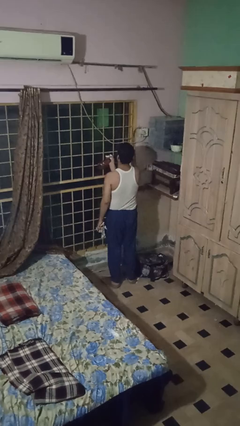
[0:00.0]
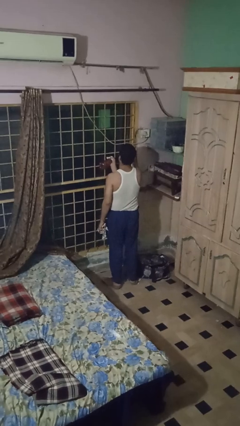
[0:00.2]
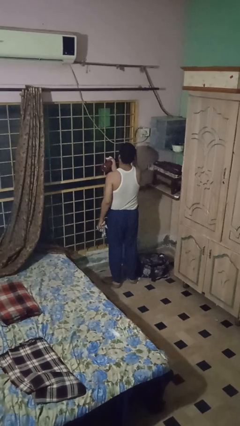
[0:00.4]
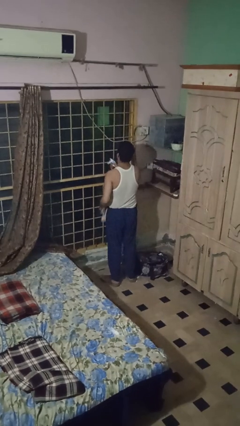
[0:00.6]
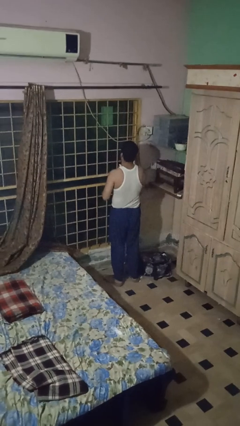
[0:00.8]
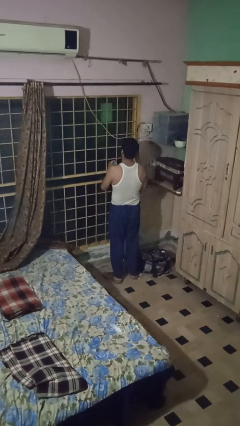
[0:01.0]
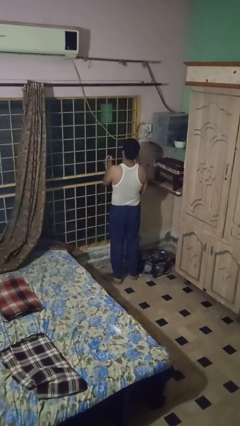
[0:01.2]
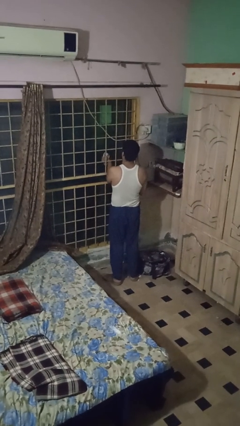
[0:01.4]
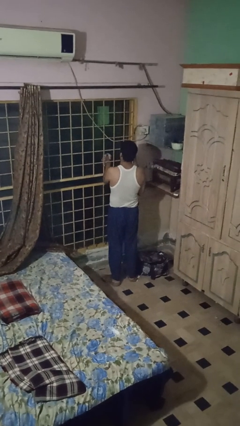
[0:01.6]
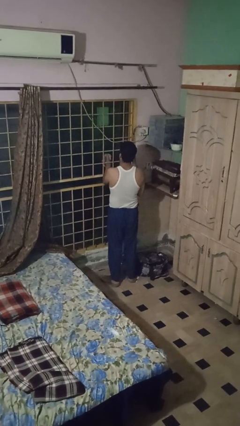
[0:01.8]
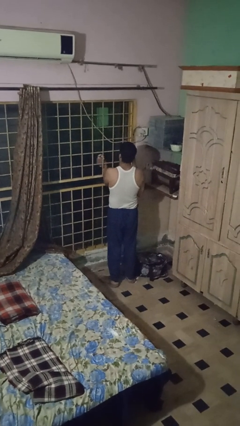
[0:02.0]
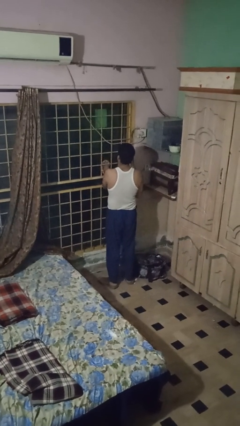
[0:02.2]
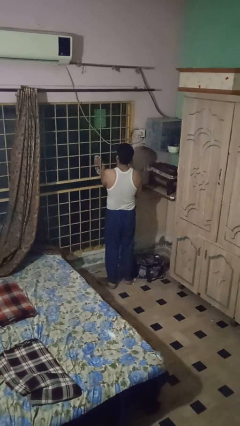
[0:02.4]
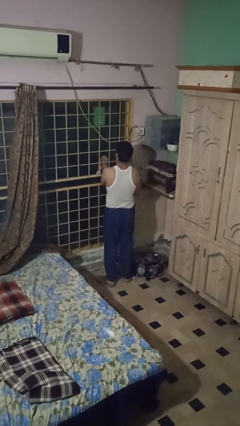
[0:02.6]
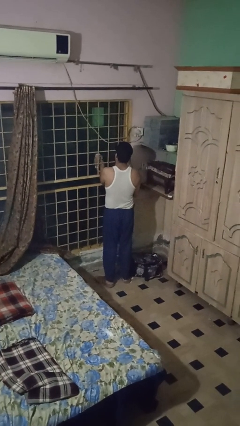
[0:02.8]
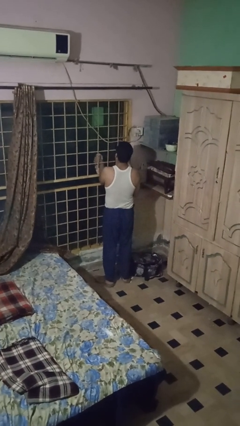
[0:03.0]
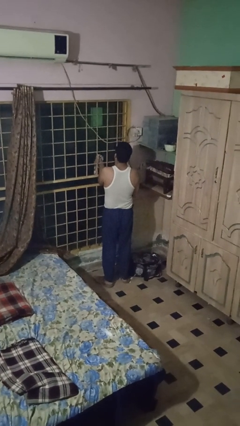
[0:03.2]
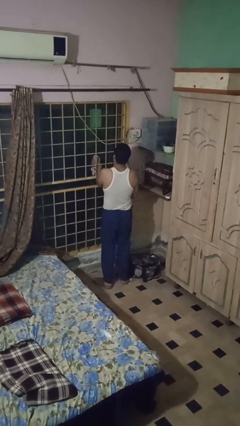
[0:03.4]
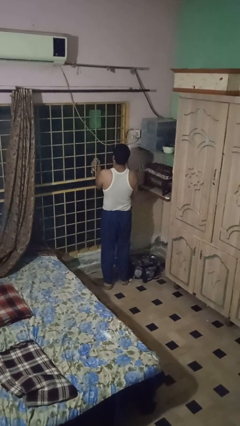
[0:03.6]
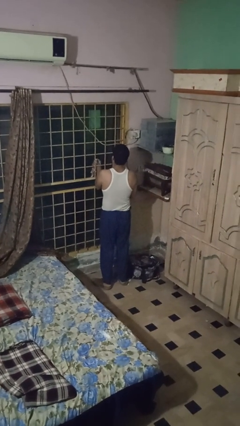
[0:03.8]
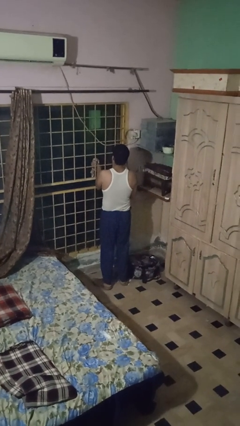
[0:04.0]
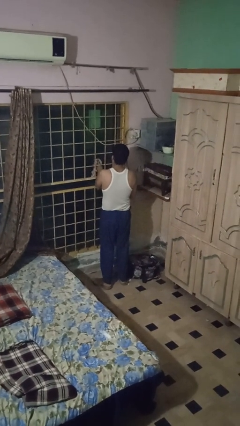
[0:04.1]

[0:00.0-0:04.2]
person washes window

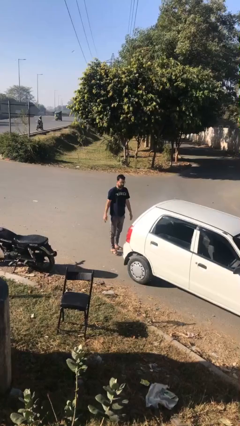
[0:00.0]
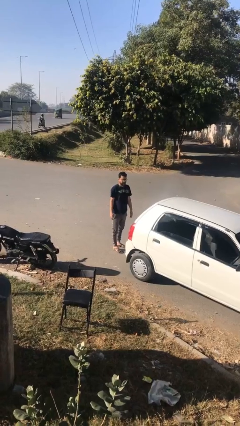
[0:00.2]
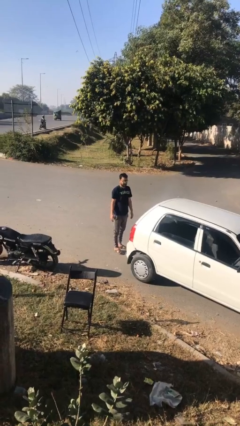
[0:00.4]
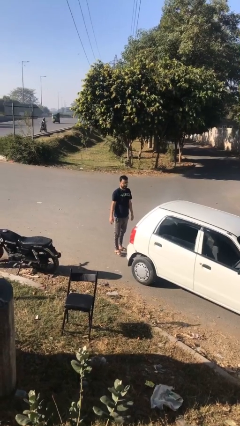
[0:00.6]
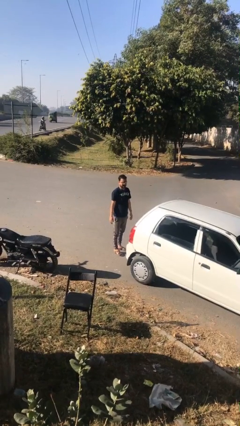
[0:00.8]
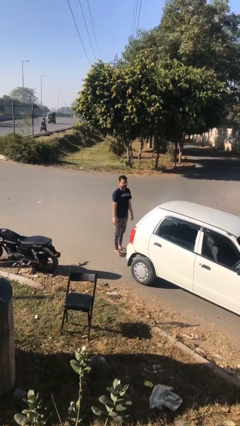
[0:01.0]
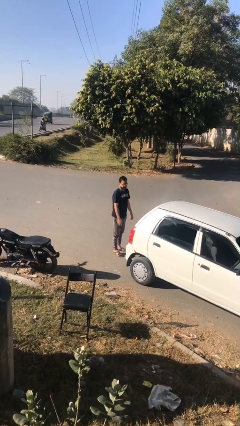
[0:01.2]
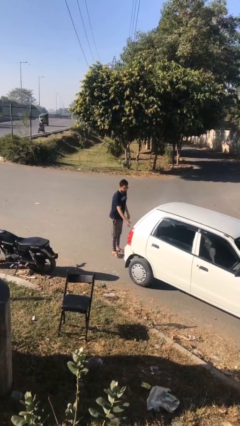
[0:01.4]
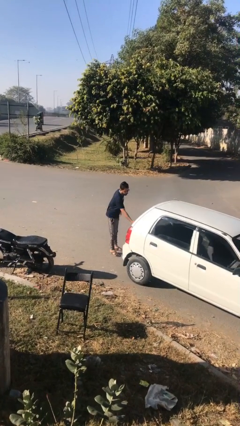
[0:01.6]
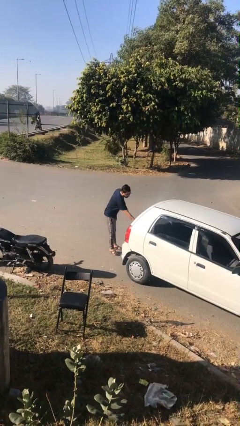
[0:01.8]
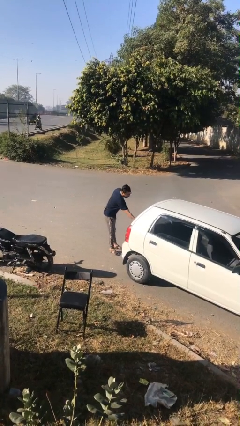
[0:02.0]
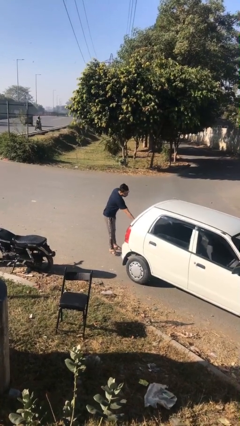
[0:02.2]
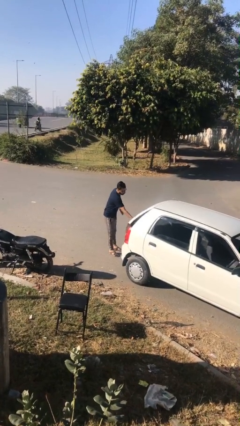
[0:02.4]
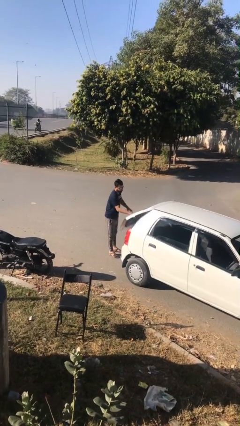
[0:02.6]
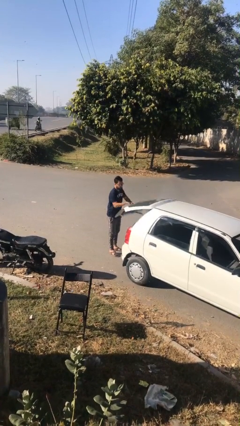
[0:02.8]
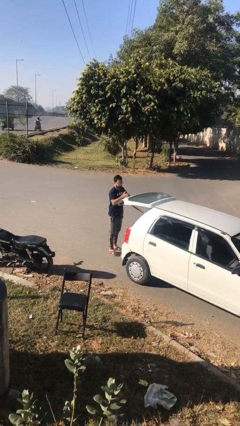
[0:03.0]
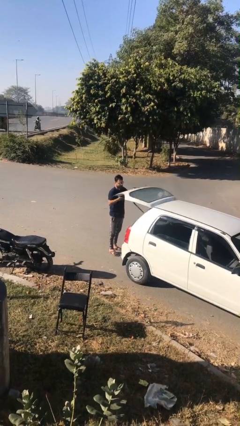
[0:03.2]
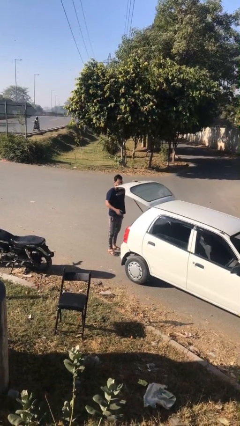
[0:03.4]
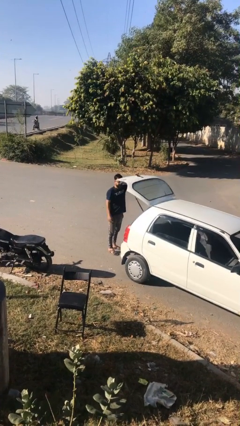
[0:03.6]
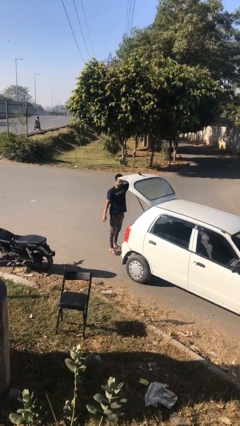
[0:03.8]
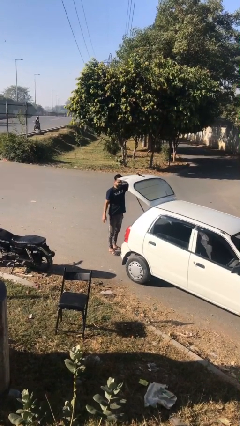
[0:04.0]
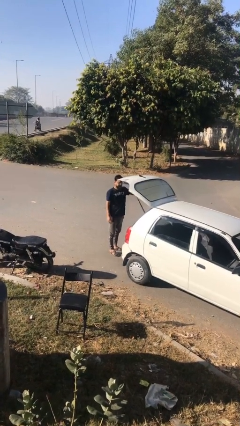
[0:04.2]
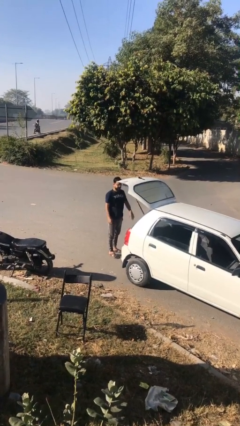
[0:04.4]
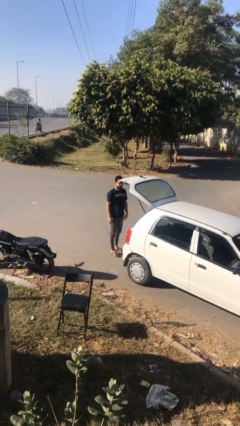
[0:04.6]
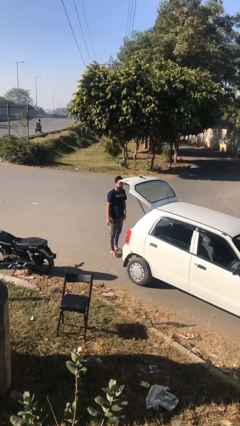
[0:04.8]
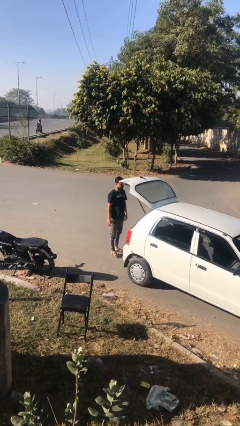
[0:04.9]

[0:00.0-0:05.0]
person opens car trunk

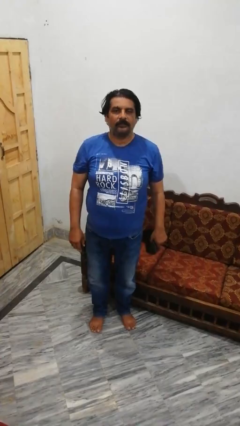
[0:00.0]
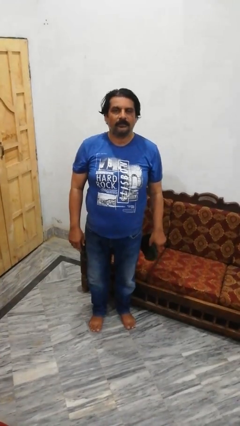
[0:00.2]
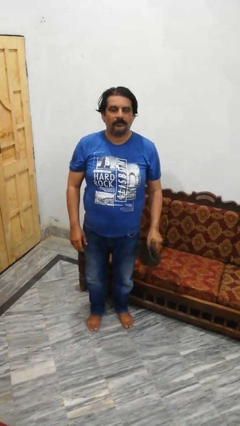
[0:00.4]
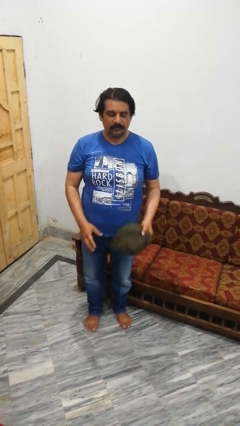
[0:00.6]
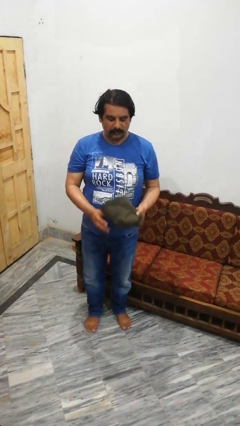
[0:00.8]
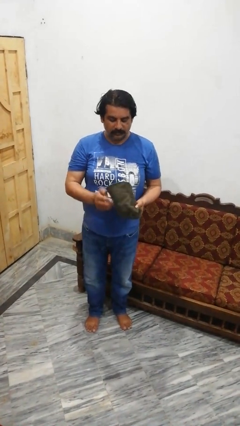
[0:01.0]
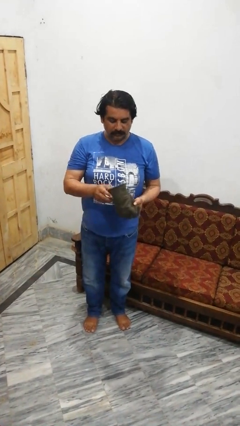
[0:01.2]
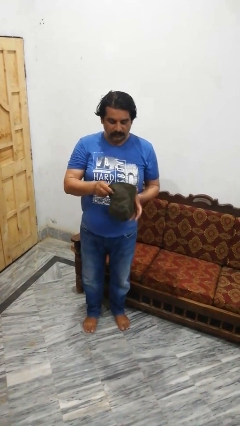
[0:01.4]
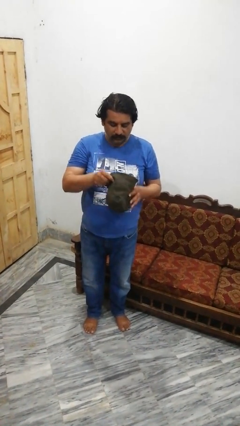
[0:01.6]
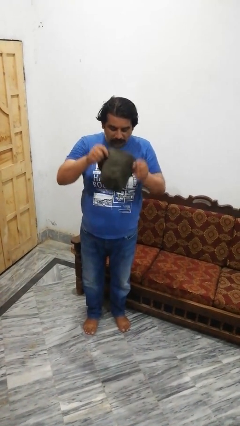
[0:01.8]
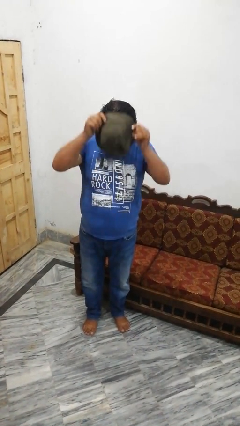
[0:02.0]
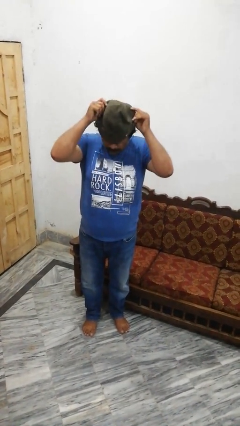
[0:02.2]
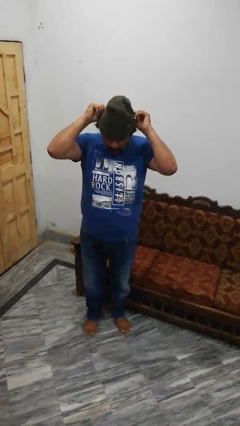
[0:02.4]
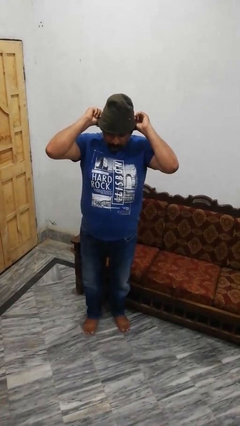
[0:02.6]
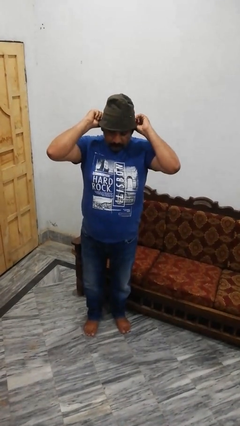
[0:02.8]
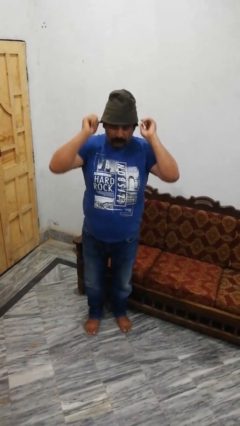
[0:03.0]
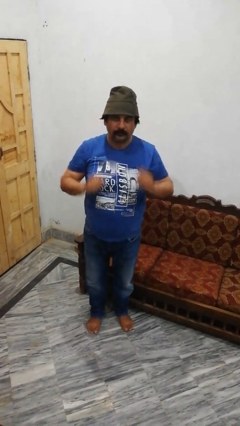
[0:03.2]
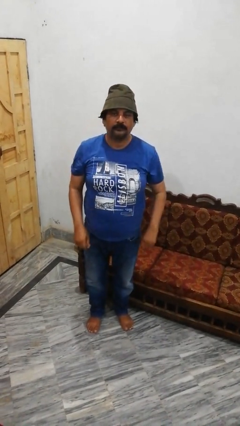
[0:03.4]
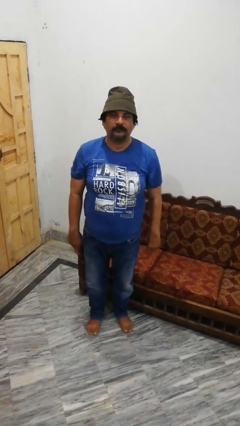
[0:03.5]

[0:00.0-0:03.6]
person puts on hat

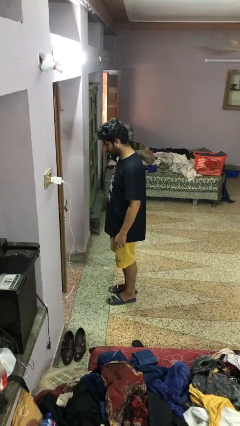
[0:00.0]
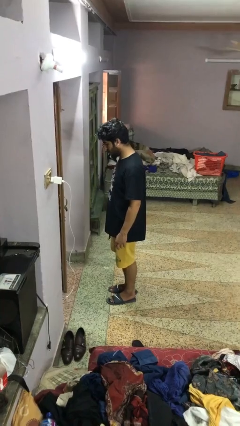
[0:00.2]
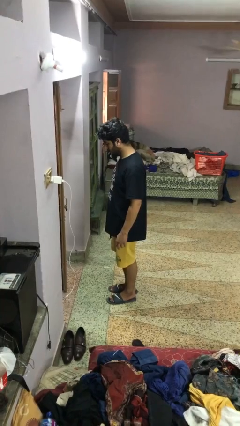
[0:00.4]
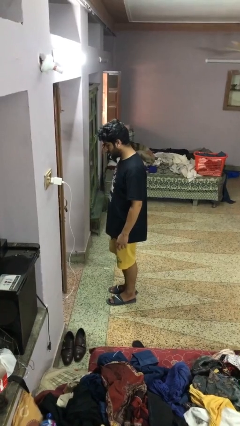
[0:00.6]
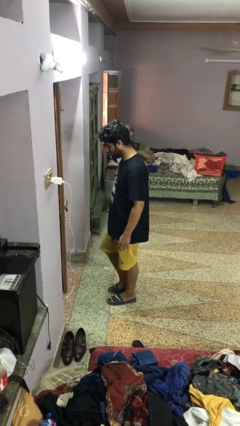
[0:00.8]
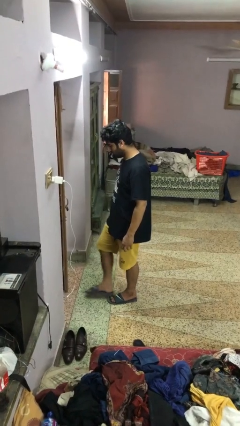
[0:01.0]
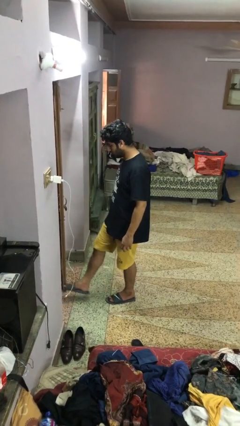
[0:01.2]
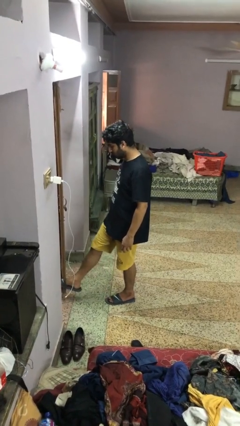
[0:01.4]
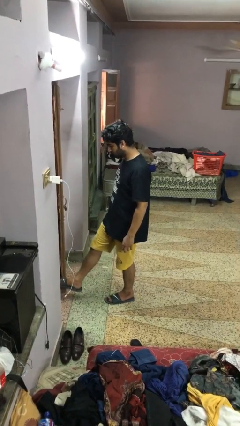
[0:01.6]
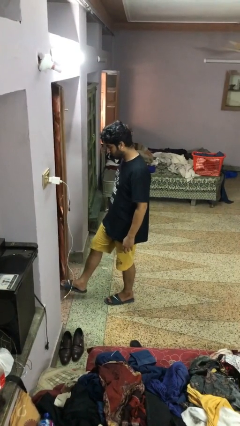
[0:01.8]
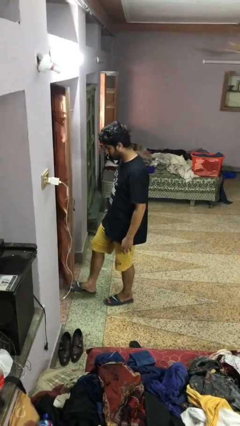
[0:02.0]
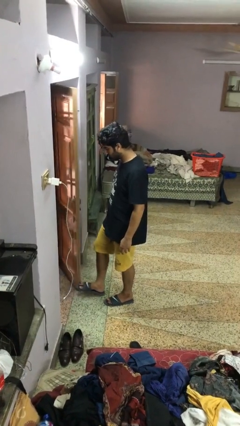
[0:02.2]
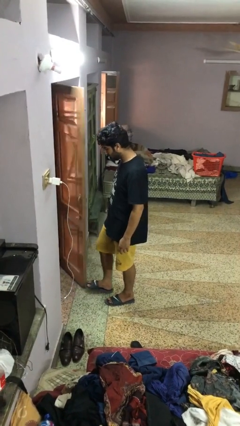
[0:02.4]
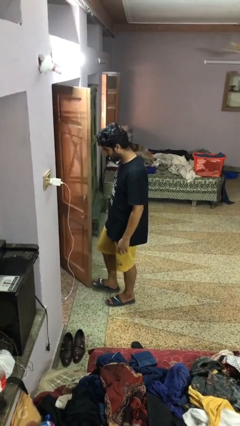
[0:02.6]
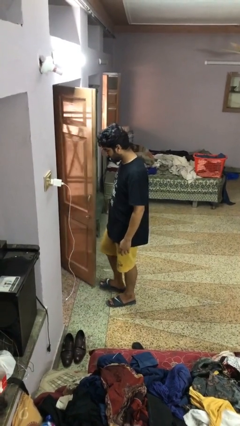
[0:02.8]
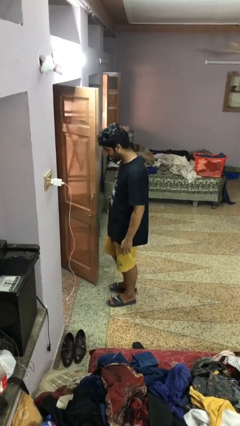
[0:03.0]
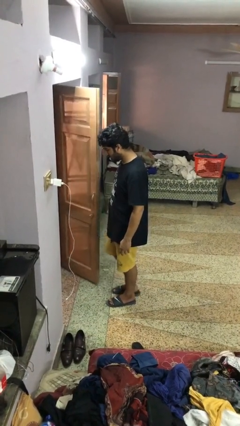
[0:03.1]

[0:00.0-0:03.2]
person opens facility door

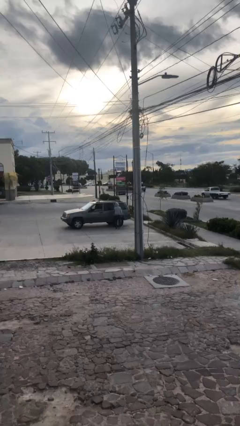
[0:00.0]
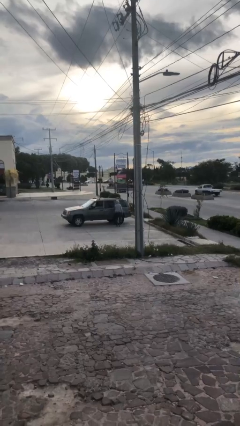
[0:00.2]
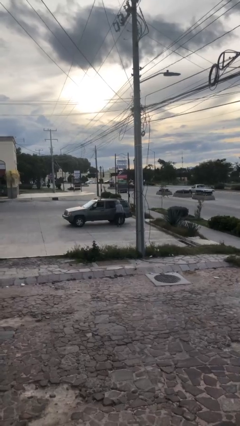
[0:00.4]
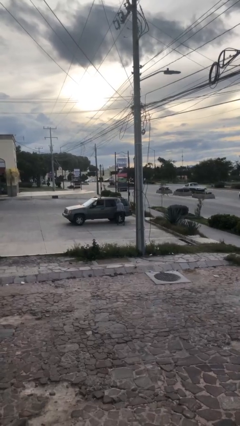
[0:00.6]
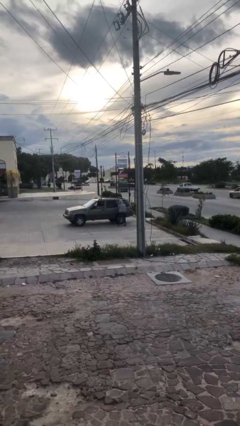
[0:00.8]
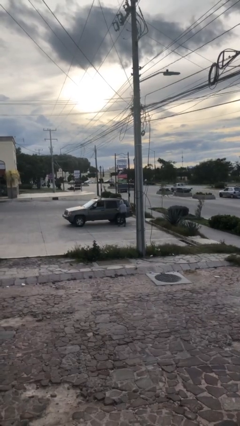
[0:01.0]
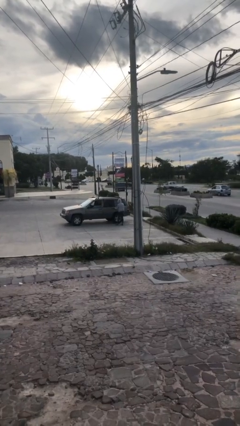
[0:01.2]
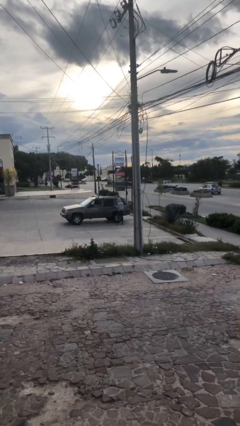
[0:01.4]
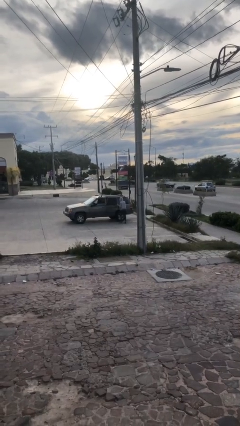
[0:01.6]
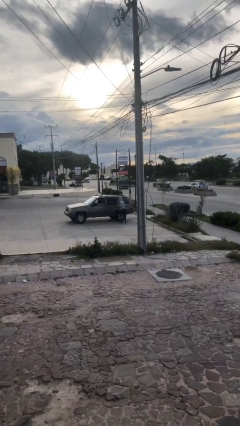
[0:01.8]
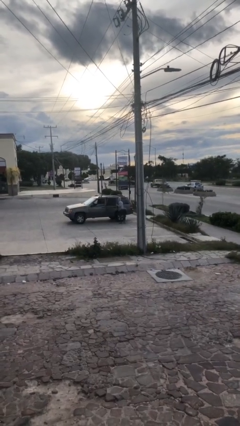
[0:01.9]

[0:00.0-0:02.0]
person opens car door
